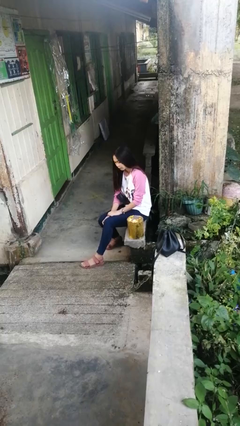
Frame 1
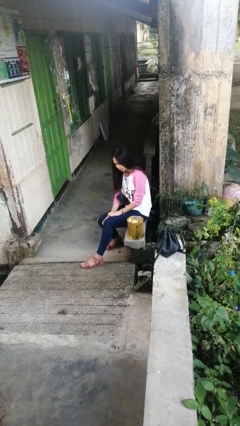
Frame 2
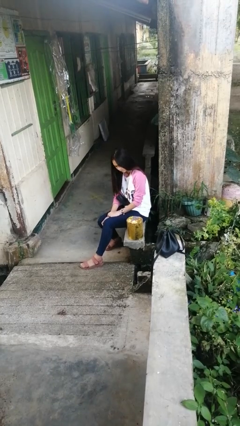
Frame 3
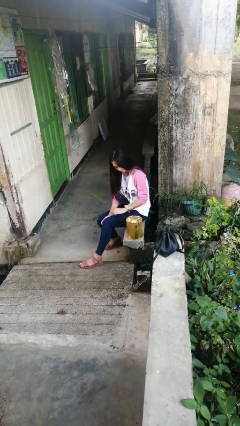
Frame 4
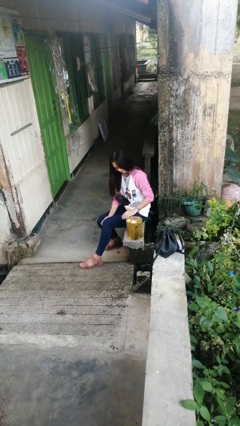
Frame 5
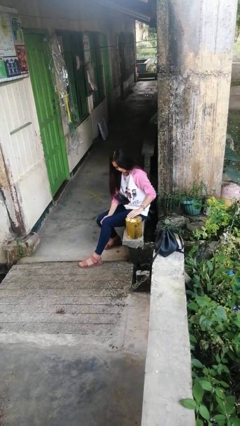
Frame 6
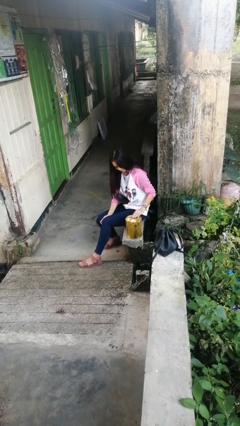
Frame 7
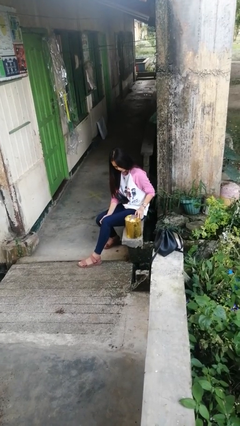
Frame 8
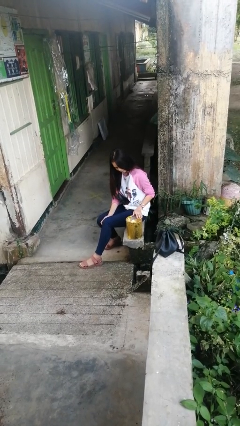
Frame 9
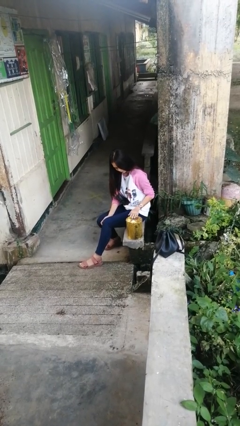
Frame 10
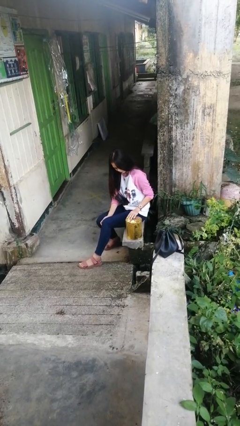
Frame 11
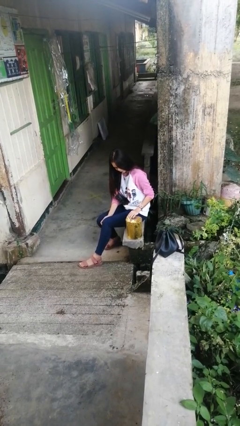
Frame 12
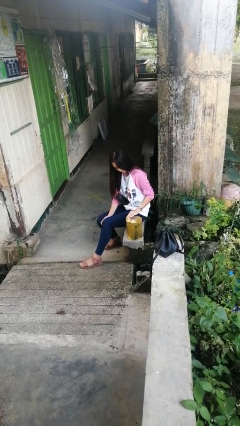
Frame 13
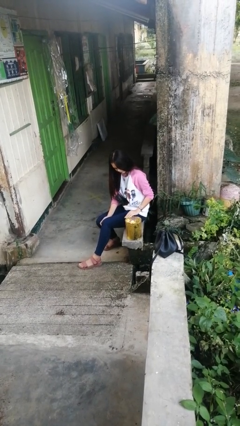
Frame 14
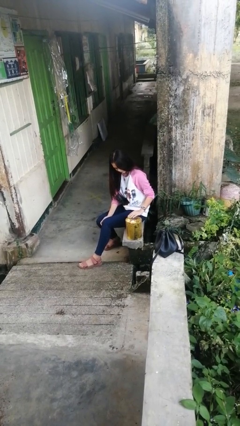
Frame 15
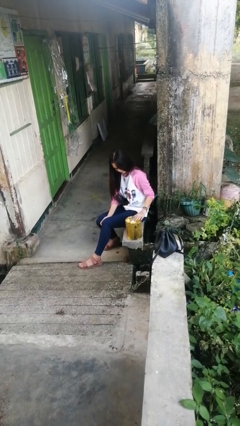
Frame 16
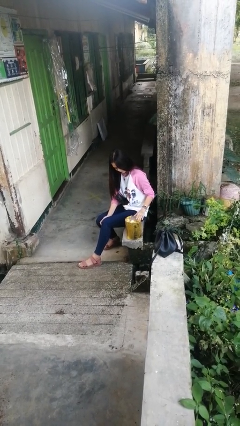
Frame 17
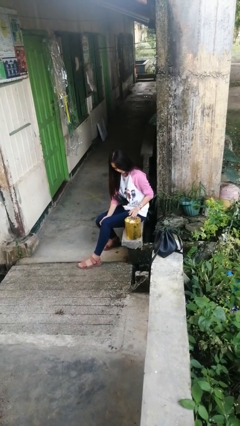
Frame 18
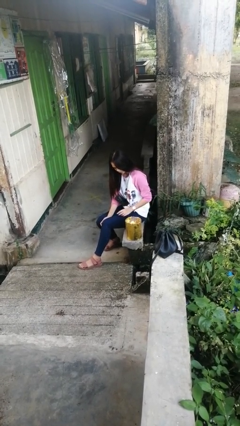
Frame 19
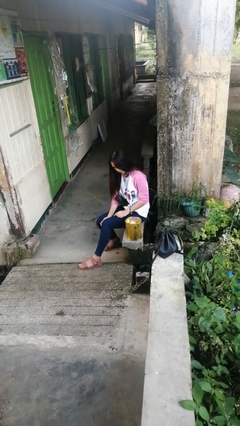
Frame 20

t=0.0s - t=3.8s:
person waves hand over object

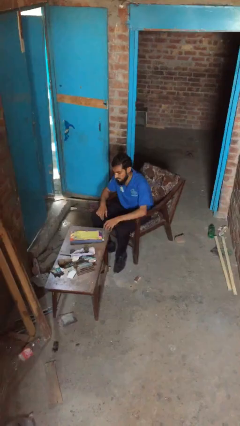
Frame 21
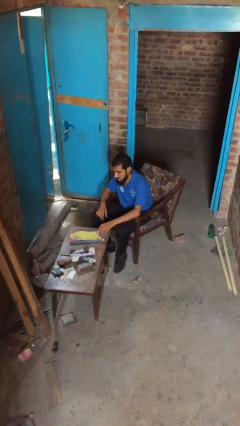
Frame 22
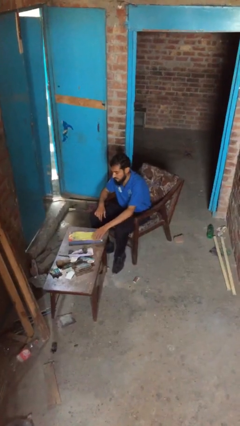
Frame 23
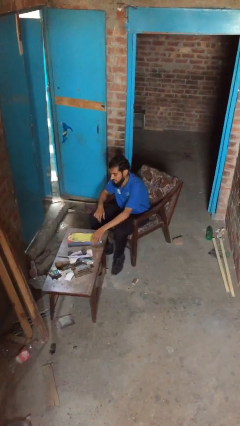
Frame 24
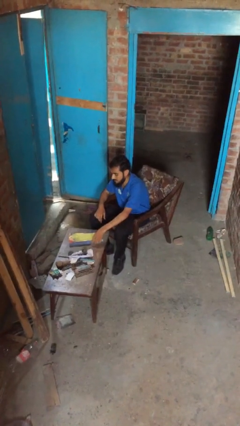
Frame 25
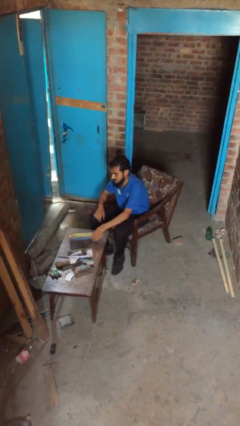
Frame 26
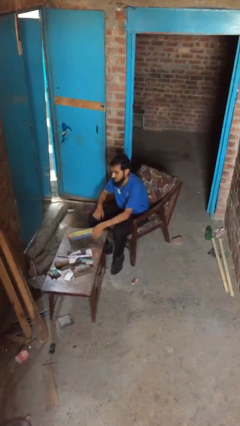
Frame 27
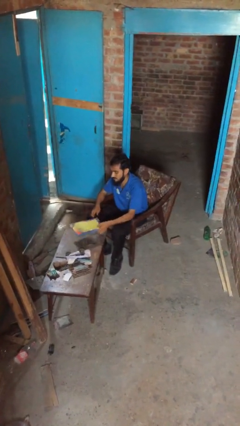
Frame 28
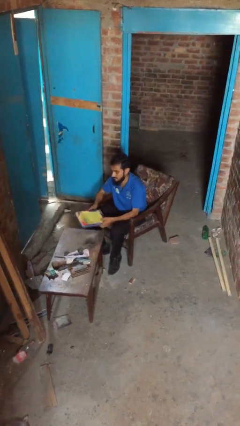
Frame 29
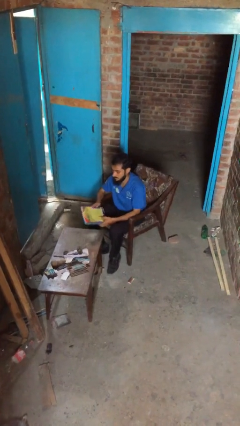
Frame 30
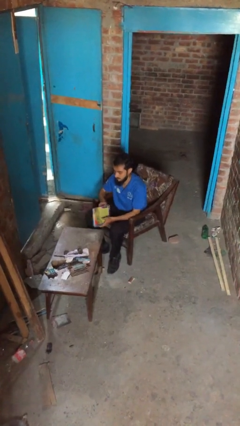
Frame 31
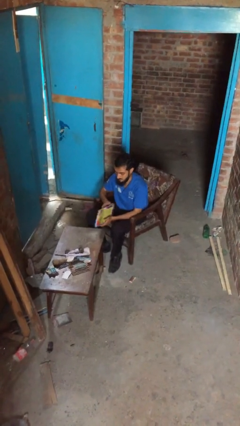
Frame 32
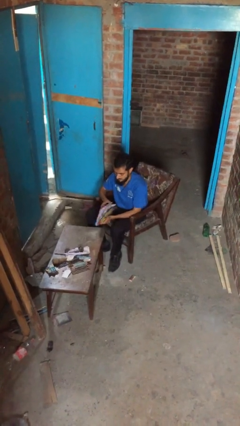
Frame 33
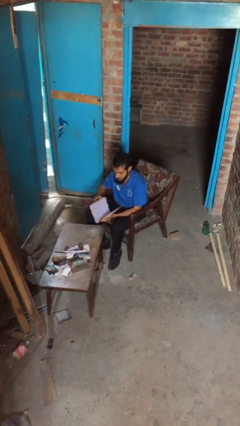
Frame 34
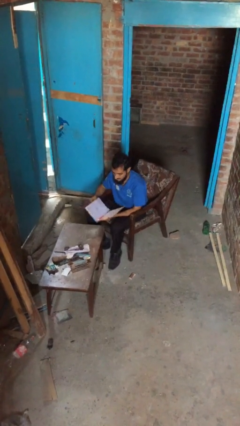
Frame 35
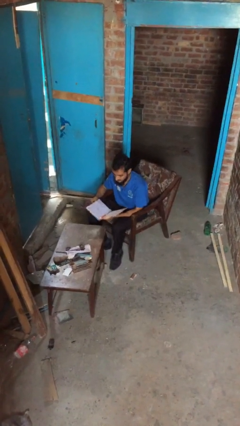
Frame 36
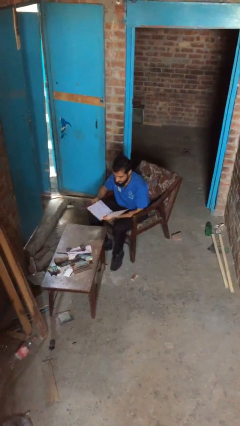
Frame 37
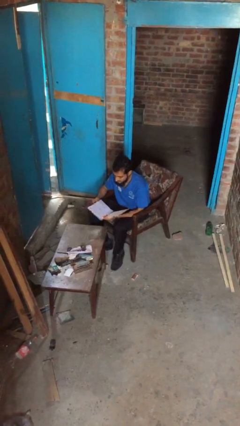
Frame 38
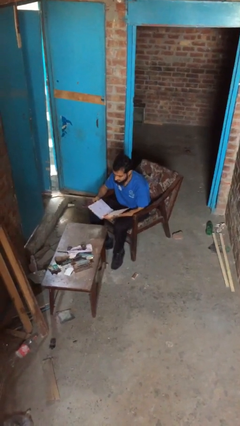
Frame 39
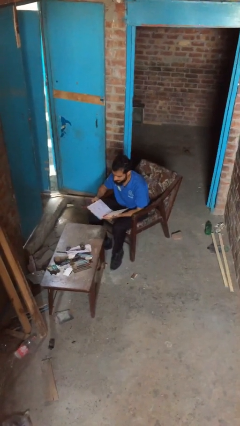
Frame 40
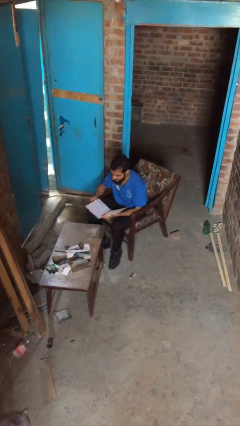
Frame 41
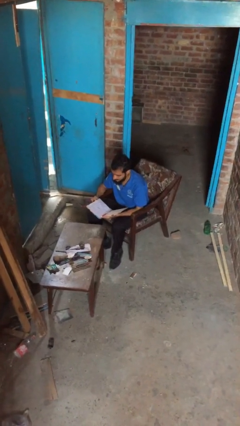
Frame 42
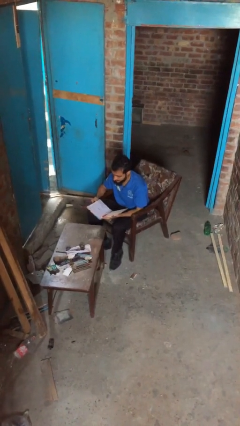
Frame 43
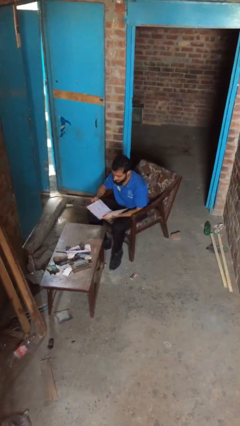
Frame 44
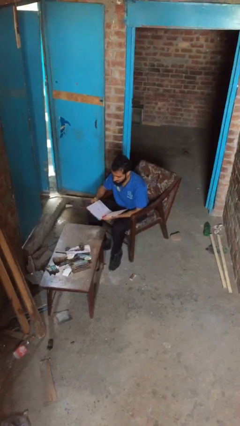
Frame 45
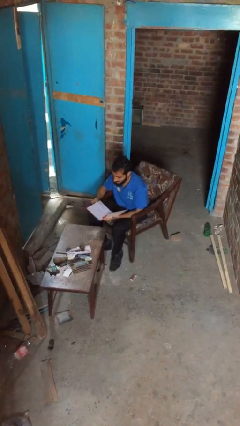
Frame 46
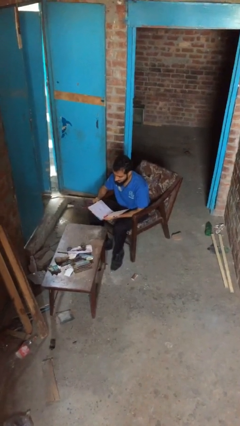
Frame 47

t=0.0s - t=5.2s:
person reads document

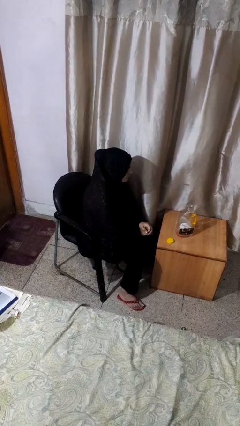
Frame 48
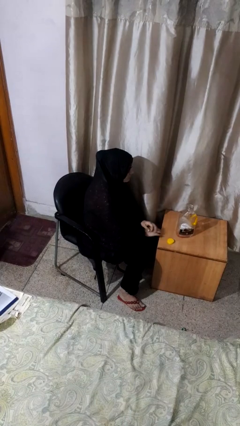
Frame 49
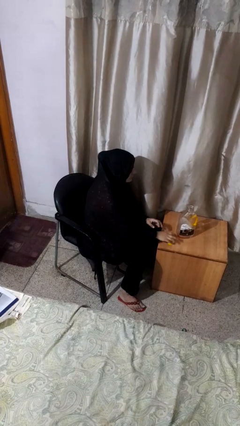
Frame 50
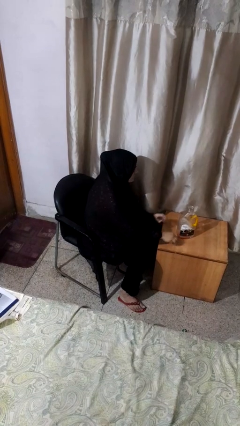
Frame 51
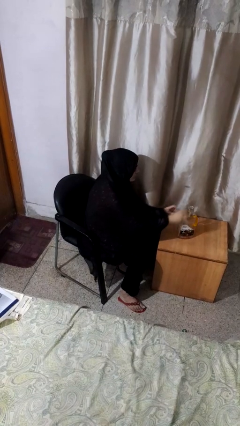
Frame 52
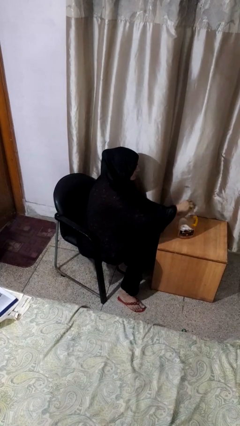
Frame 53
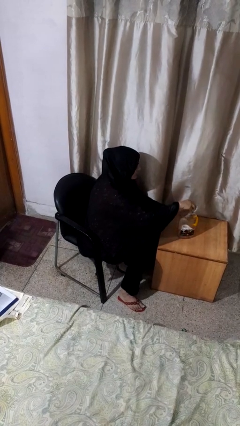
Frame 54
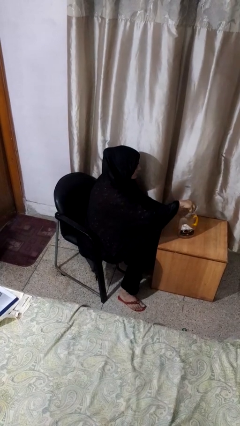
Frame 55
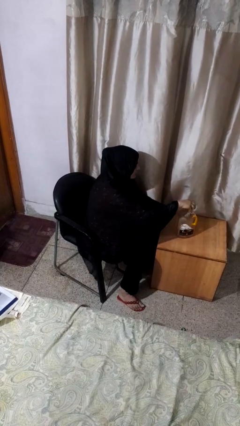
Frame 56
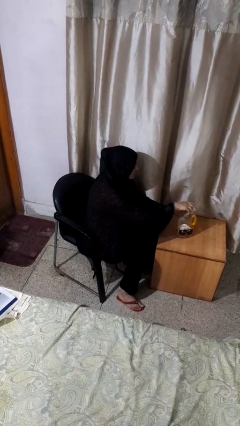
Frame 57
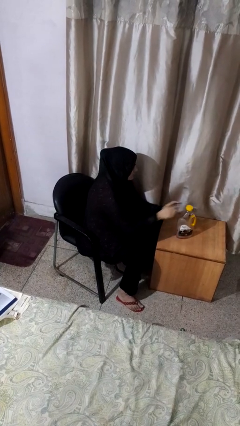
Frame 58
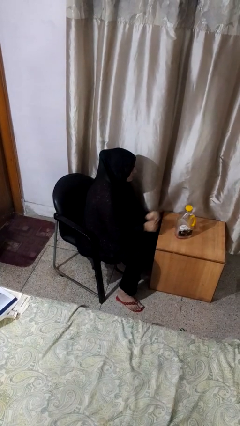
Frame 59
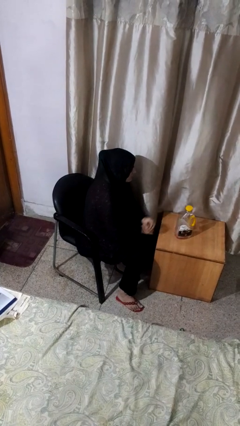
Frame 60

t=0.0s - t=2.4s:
person screws lid to bottle

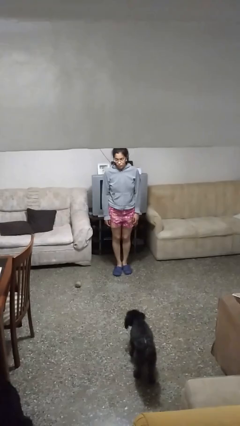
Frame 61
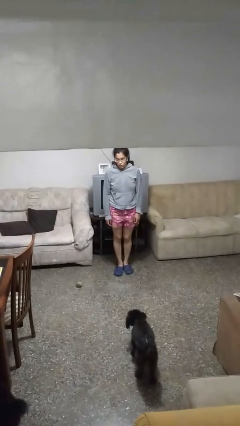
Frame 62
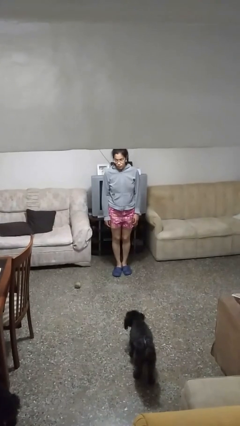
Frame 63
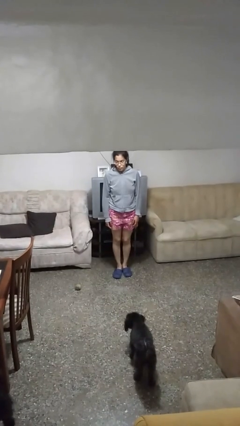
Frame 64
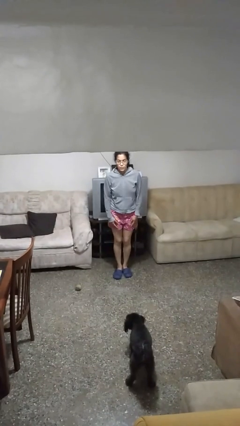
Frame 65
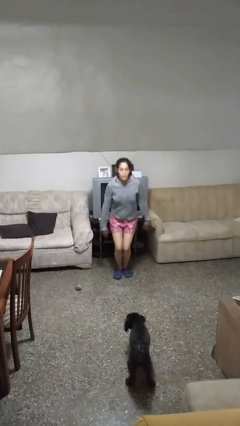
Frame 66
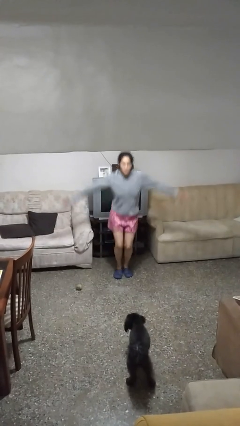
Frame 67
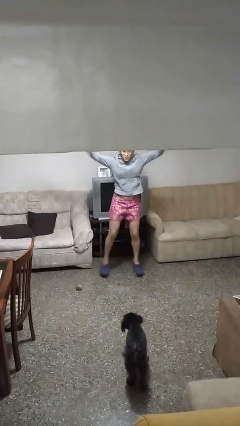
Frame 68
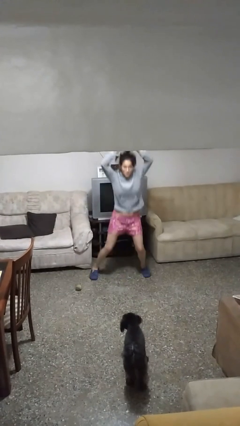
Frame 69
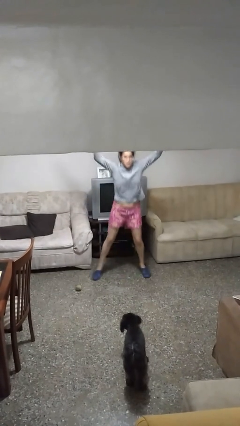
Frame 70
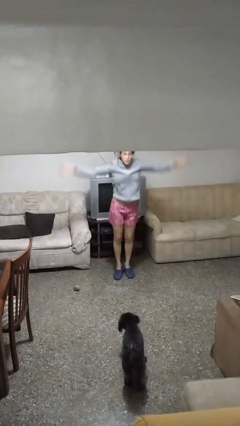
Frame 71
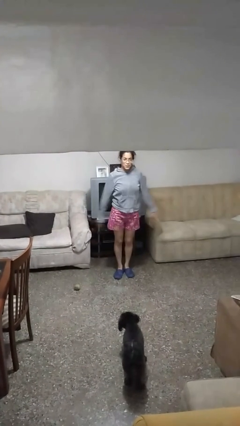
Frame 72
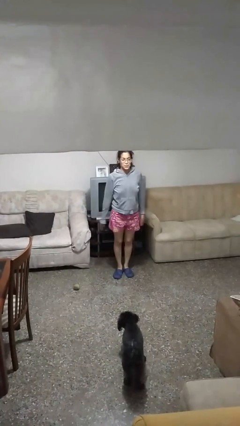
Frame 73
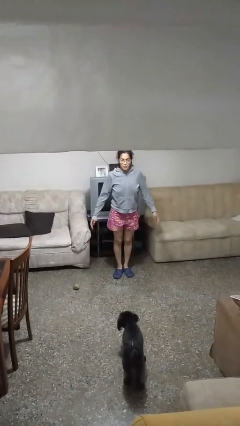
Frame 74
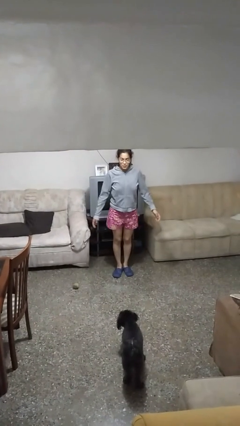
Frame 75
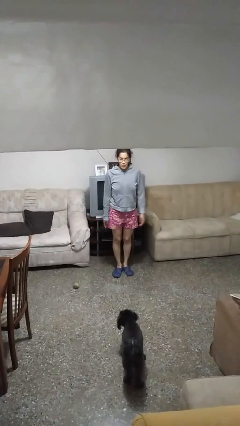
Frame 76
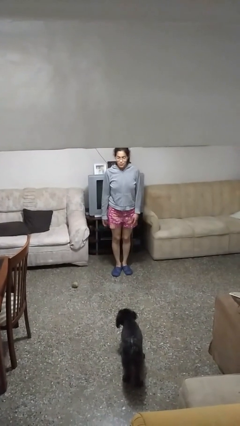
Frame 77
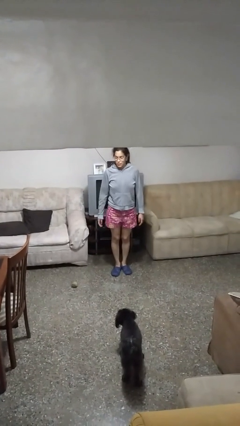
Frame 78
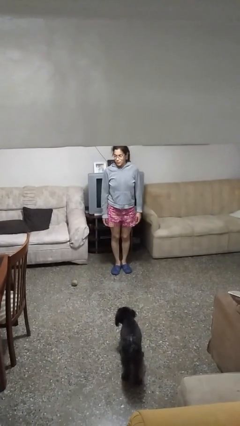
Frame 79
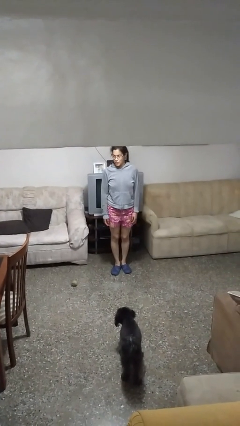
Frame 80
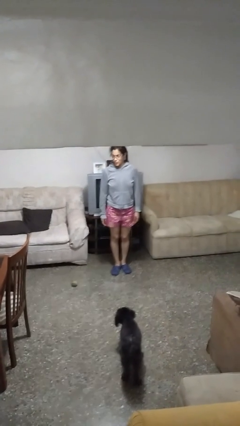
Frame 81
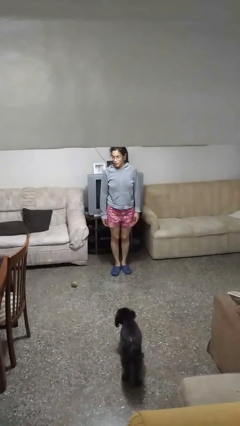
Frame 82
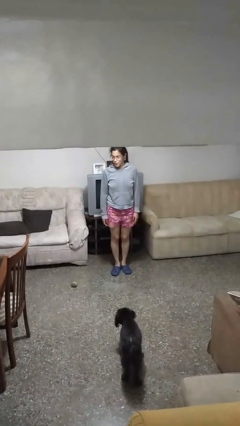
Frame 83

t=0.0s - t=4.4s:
person exercises with jumping jacks

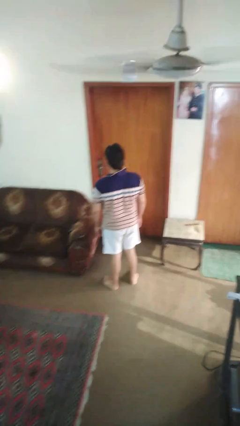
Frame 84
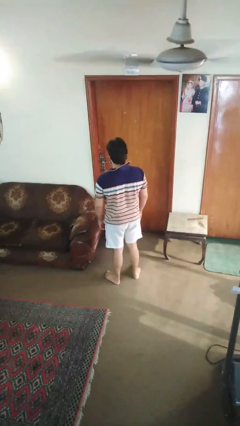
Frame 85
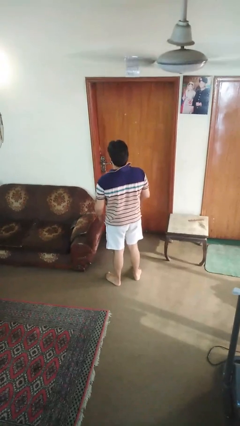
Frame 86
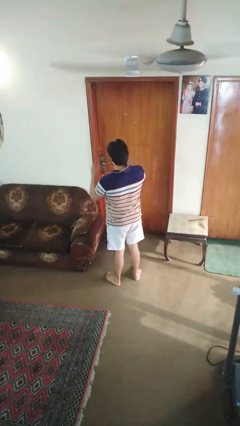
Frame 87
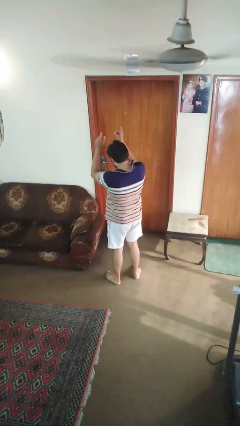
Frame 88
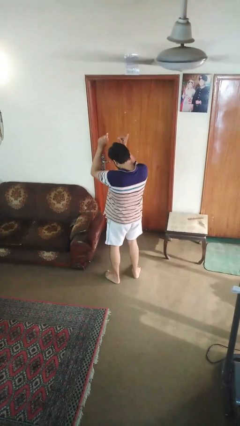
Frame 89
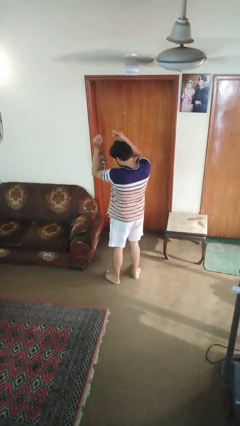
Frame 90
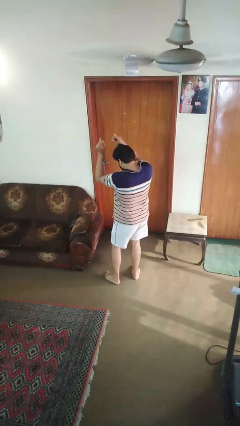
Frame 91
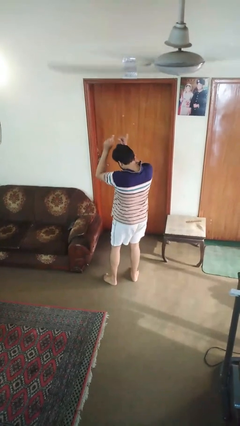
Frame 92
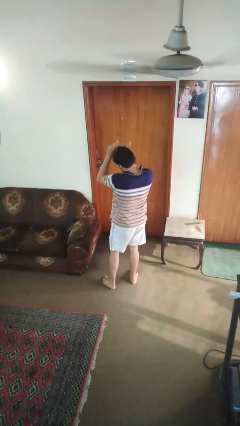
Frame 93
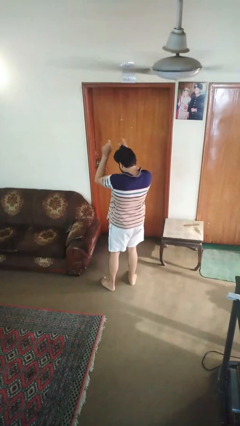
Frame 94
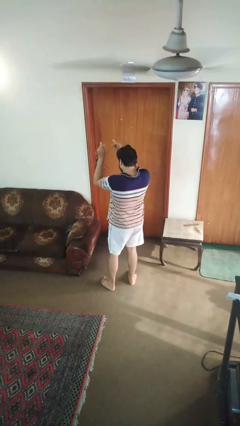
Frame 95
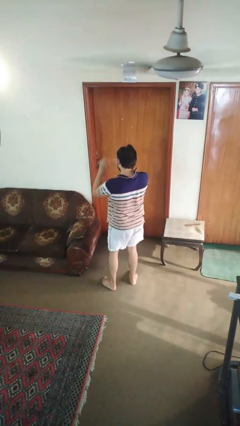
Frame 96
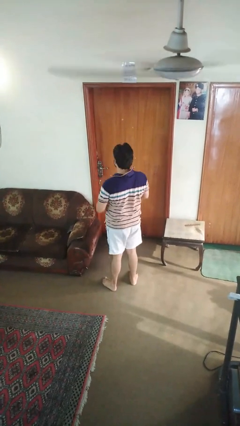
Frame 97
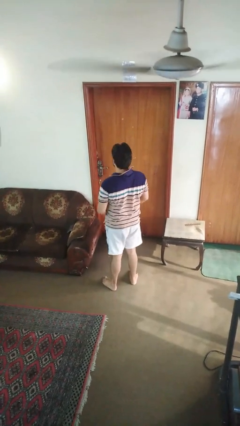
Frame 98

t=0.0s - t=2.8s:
person dances in place
